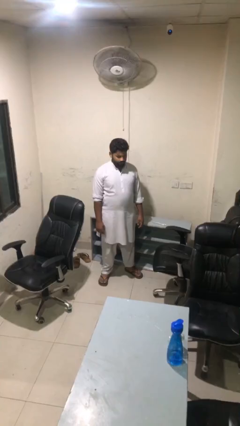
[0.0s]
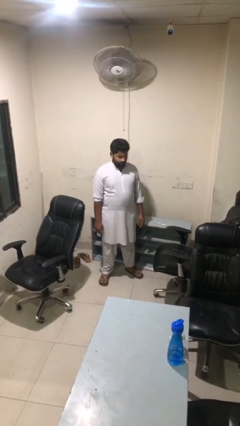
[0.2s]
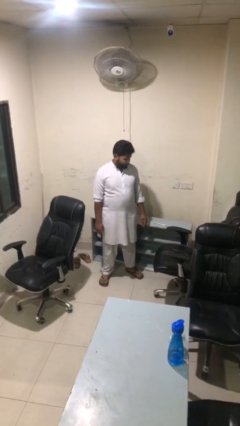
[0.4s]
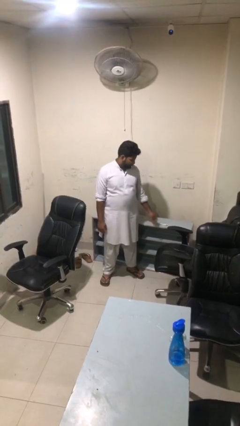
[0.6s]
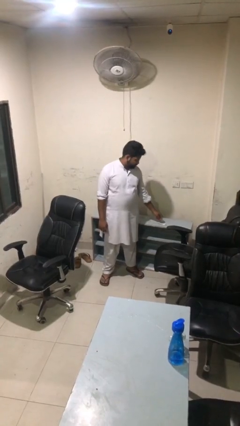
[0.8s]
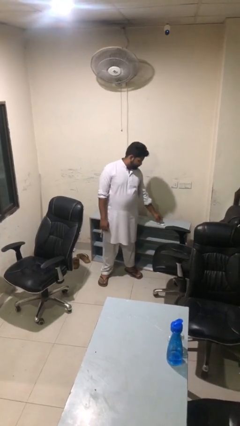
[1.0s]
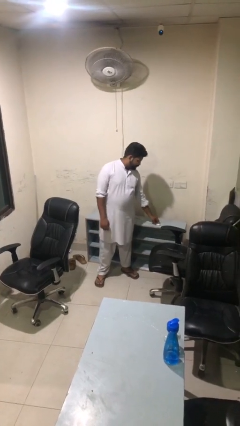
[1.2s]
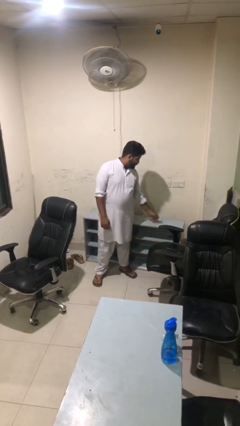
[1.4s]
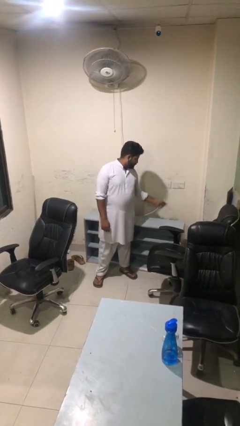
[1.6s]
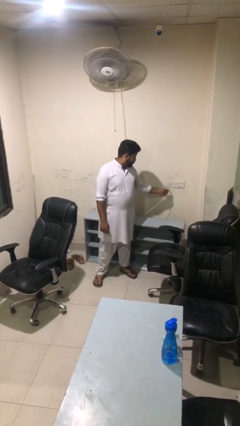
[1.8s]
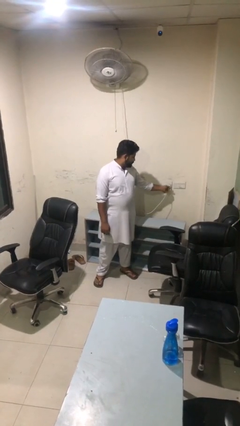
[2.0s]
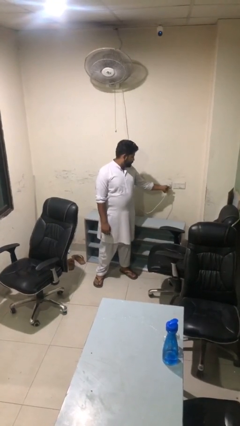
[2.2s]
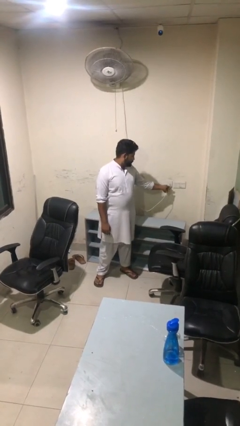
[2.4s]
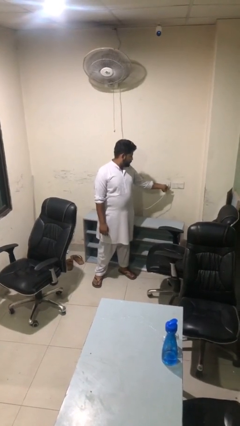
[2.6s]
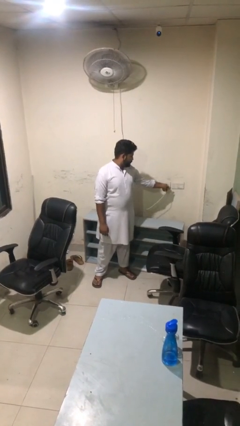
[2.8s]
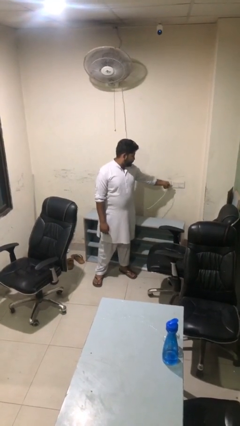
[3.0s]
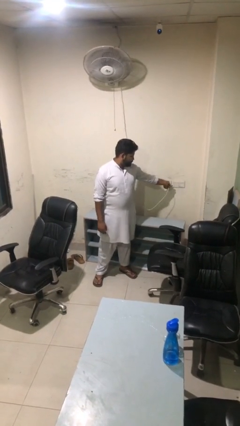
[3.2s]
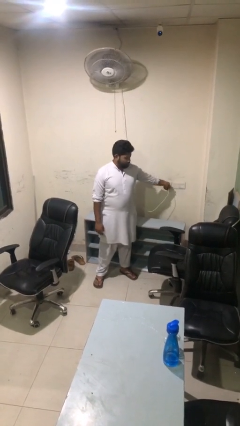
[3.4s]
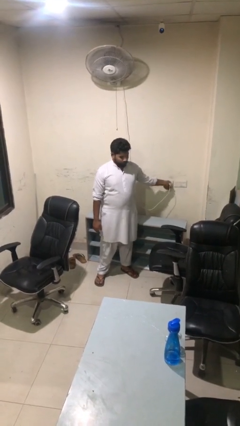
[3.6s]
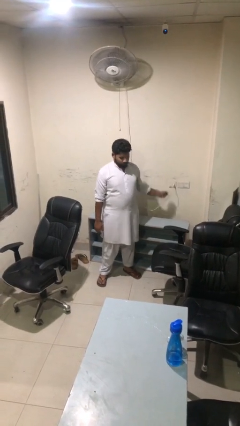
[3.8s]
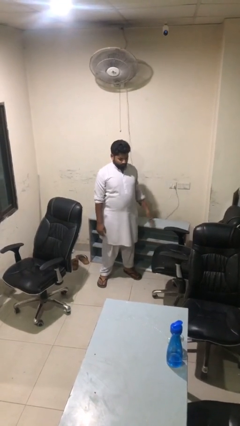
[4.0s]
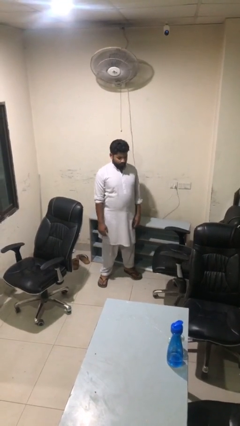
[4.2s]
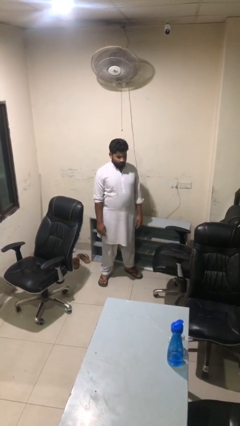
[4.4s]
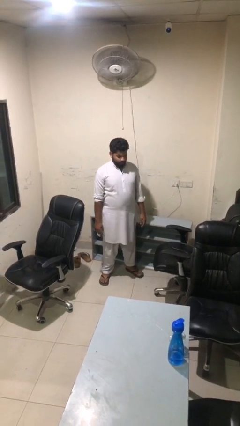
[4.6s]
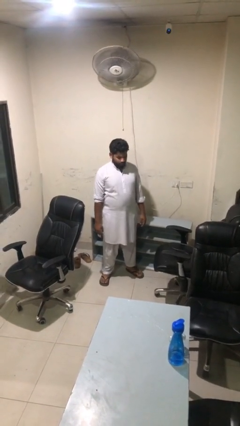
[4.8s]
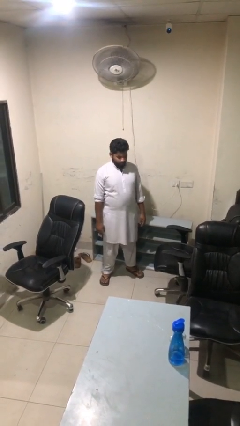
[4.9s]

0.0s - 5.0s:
person plugs into electrical socket

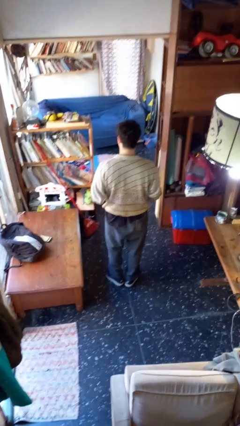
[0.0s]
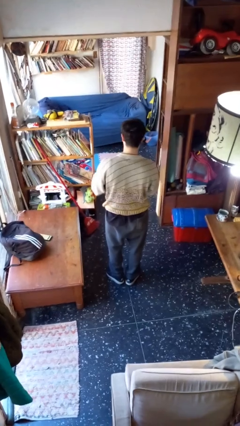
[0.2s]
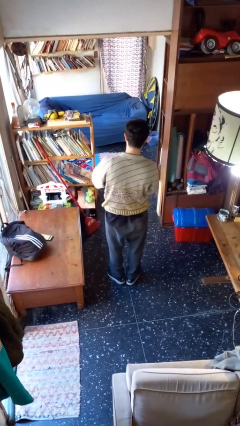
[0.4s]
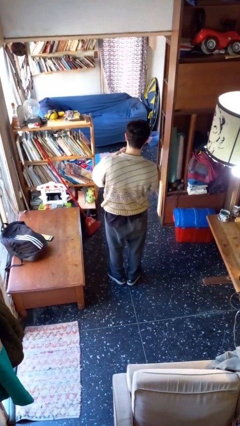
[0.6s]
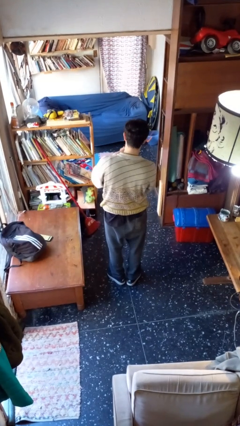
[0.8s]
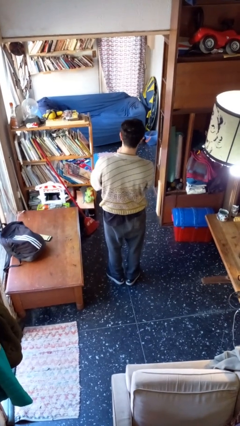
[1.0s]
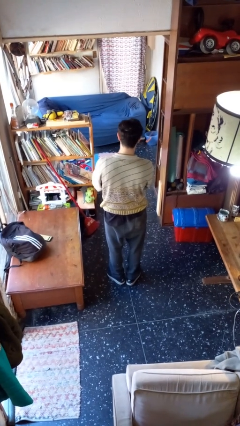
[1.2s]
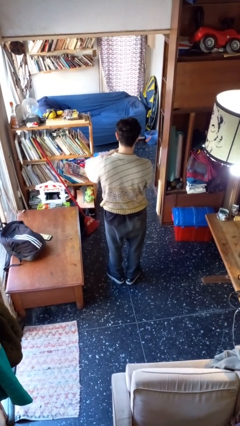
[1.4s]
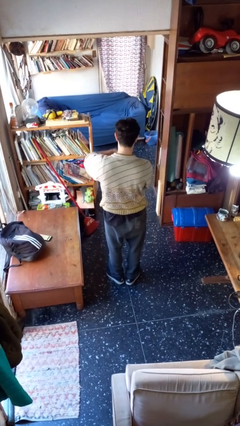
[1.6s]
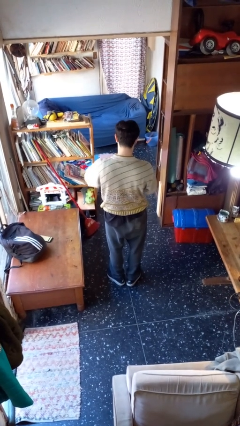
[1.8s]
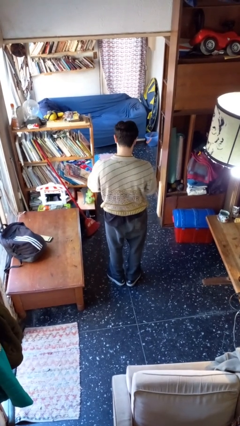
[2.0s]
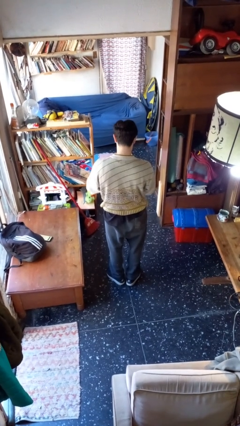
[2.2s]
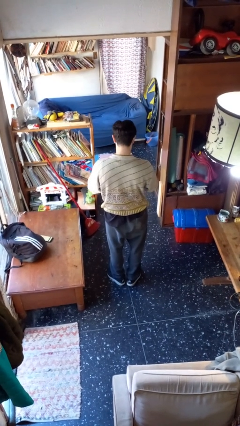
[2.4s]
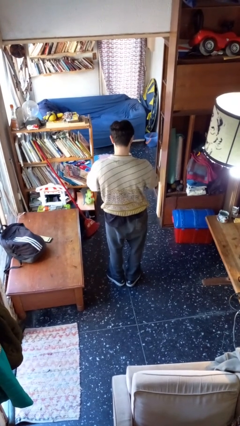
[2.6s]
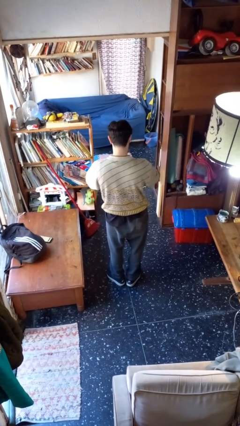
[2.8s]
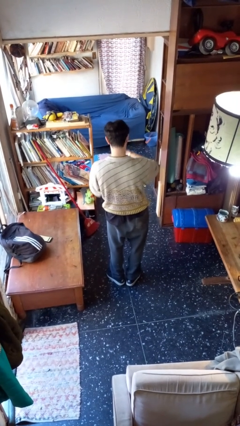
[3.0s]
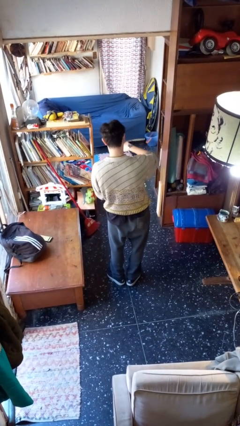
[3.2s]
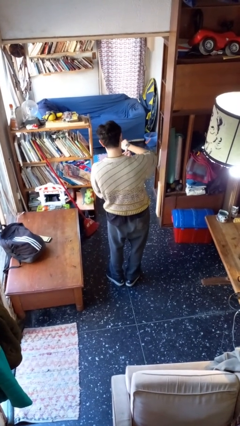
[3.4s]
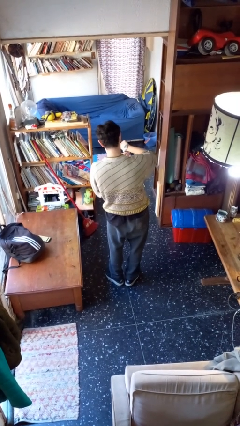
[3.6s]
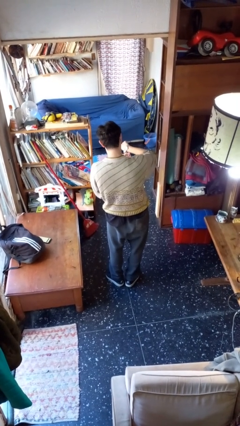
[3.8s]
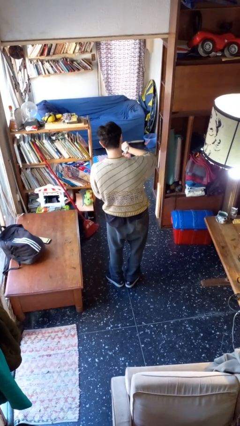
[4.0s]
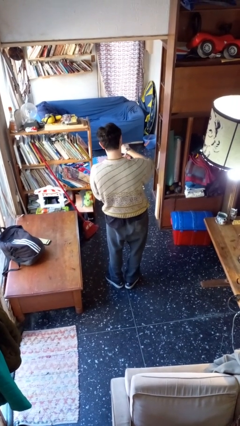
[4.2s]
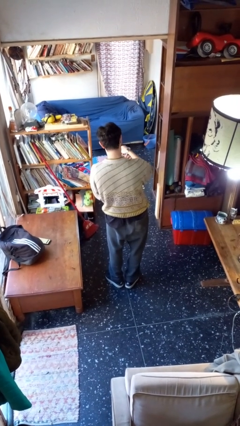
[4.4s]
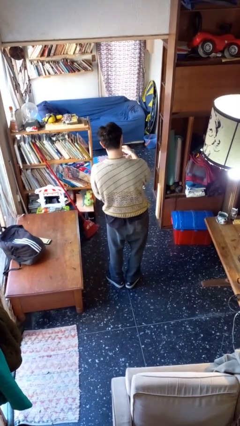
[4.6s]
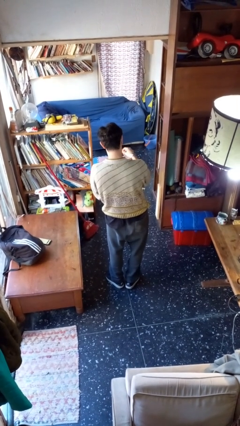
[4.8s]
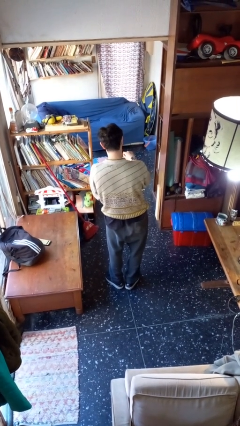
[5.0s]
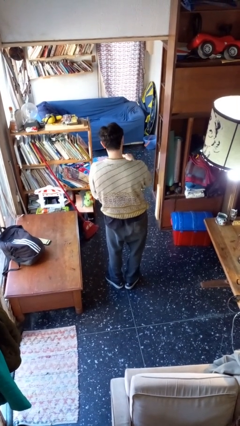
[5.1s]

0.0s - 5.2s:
person puts on wristwatch

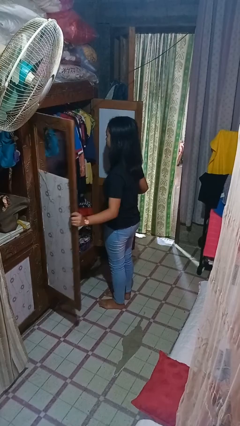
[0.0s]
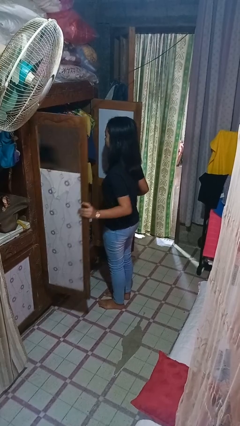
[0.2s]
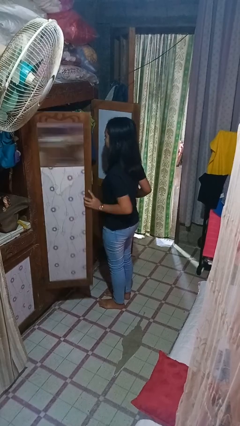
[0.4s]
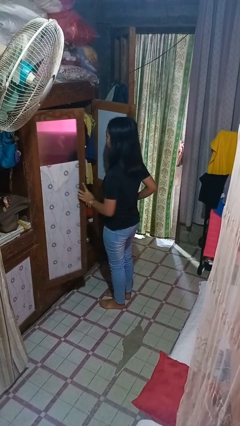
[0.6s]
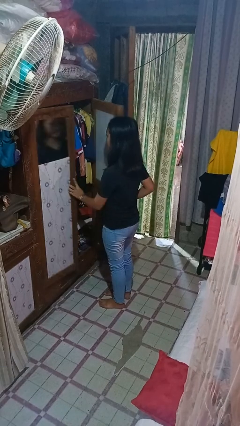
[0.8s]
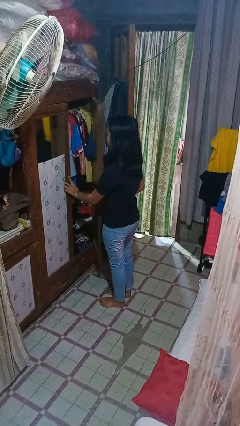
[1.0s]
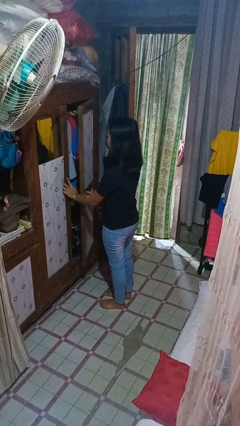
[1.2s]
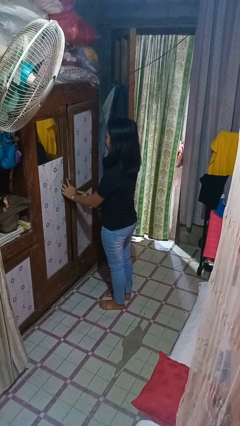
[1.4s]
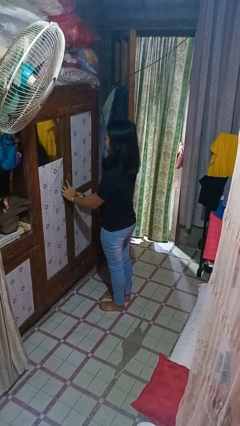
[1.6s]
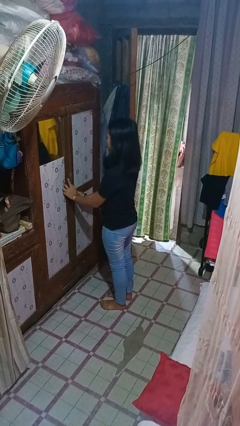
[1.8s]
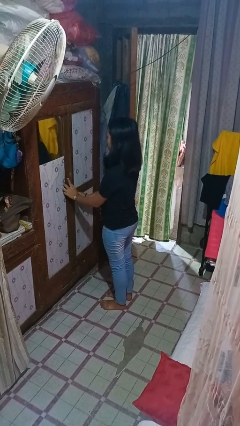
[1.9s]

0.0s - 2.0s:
person closes closet door

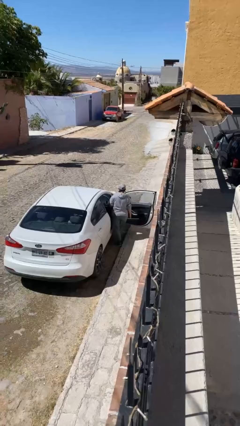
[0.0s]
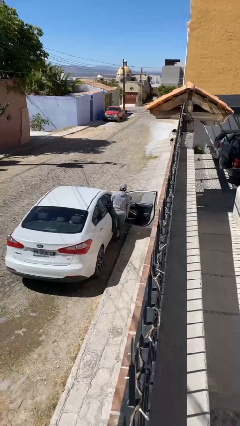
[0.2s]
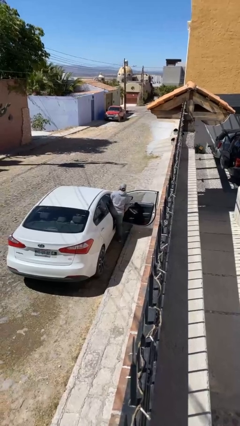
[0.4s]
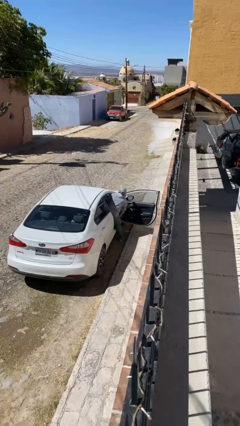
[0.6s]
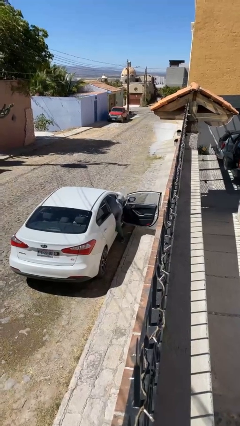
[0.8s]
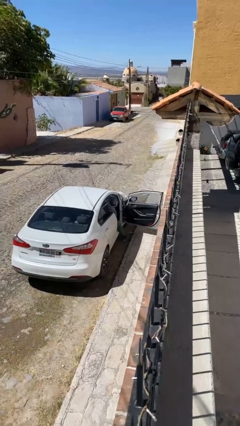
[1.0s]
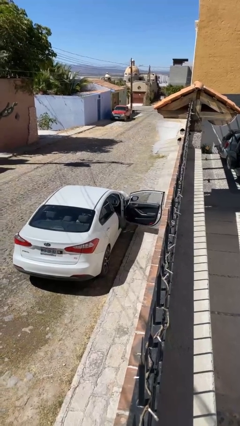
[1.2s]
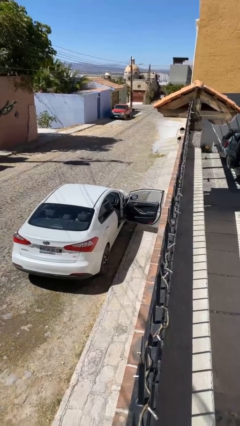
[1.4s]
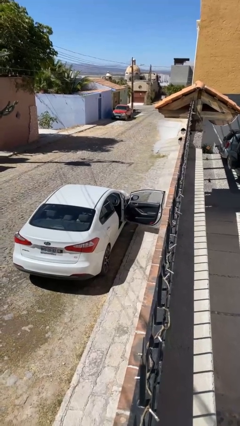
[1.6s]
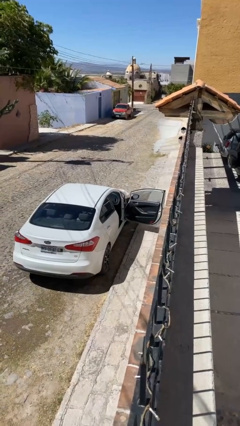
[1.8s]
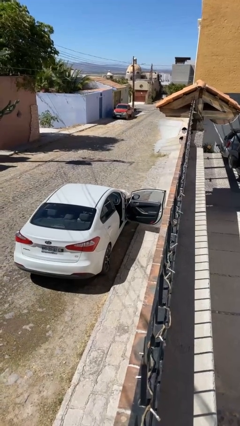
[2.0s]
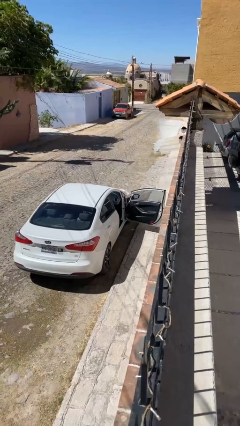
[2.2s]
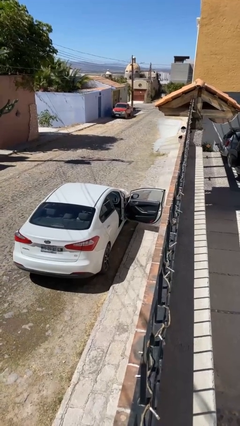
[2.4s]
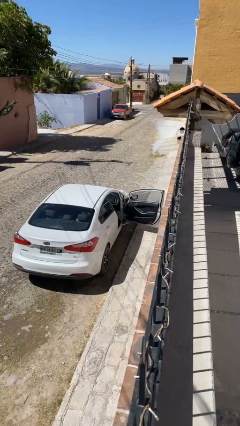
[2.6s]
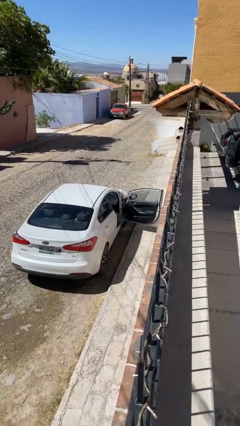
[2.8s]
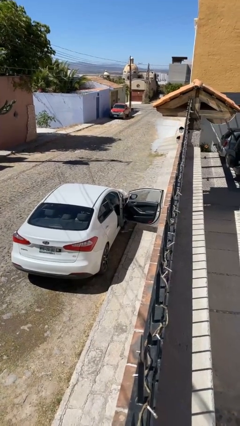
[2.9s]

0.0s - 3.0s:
person enters car

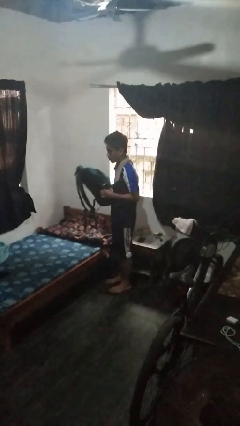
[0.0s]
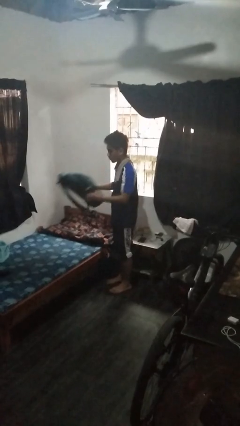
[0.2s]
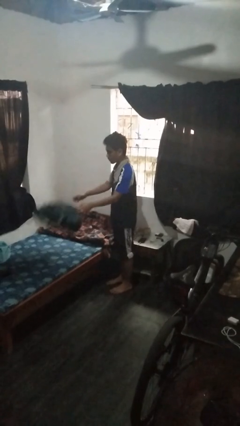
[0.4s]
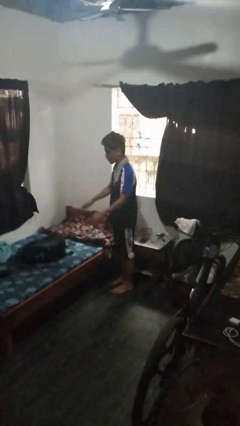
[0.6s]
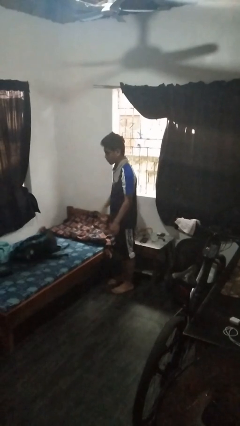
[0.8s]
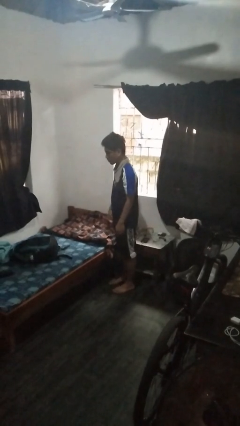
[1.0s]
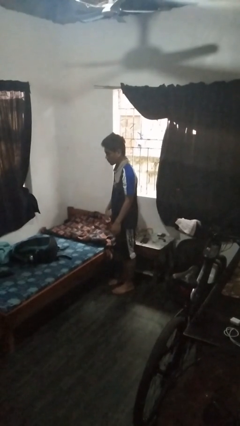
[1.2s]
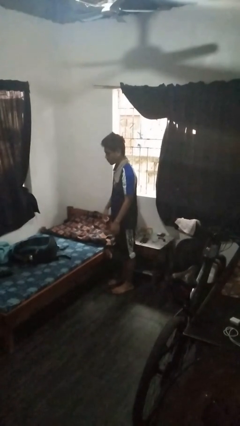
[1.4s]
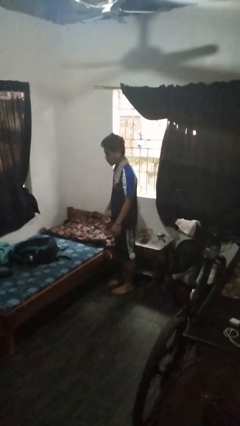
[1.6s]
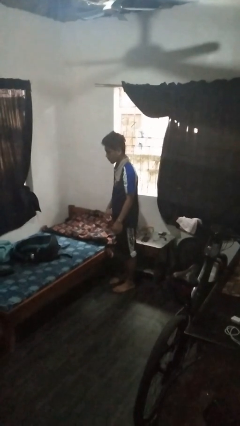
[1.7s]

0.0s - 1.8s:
person throws object on bed

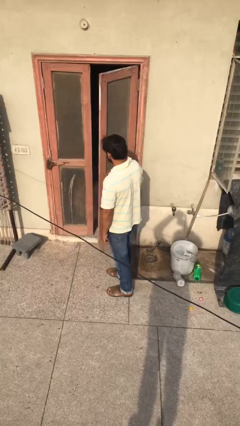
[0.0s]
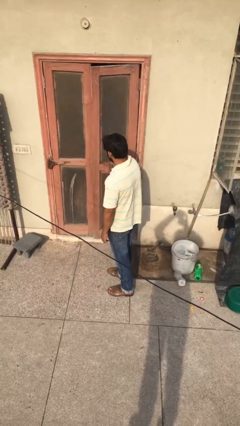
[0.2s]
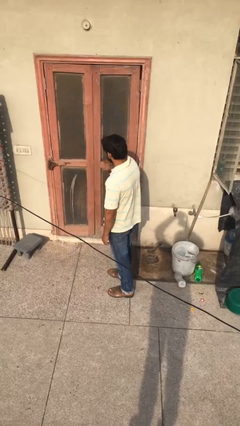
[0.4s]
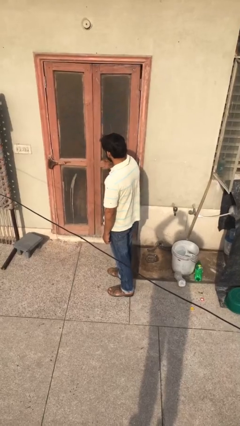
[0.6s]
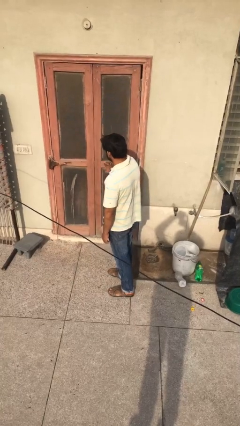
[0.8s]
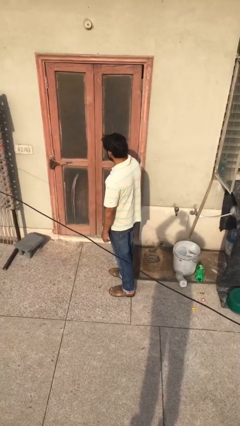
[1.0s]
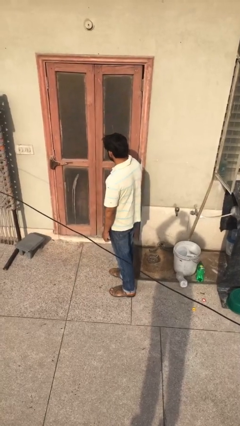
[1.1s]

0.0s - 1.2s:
person closes facility door
